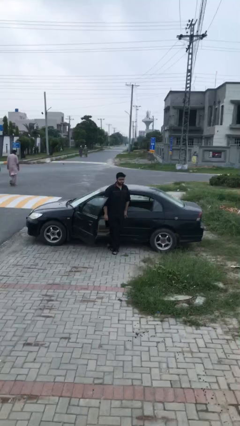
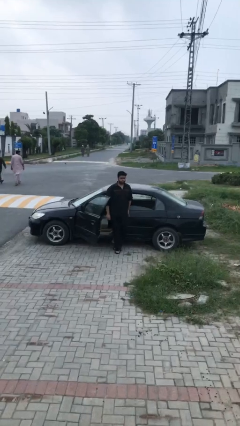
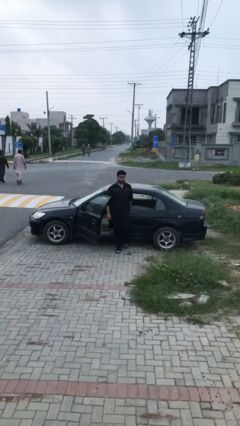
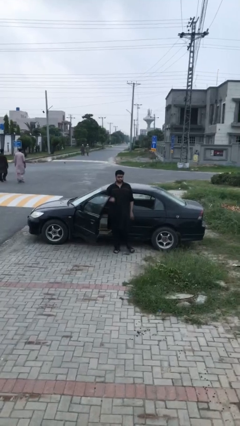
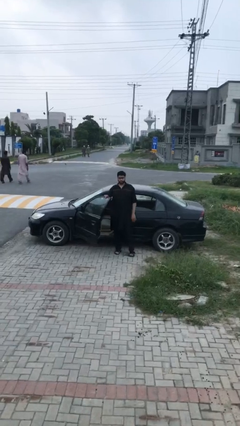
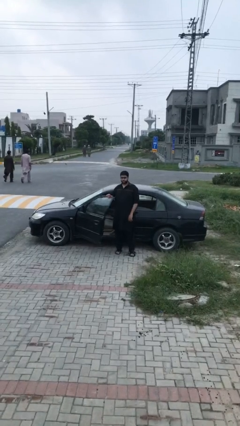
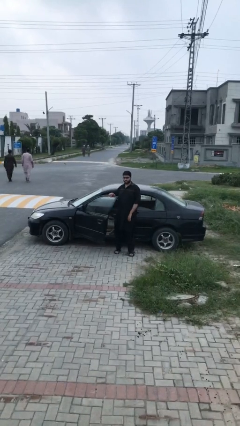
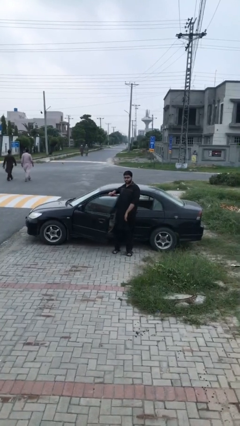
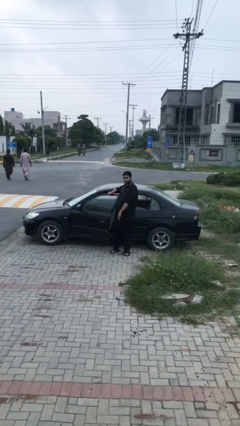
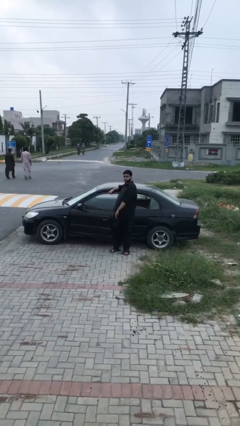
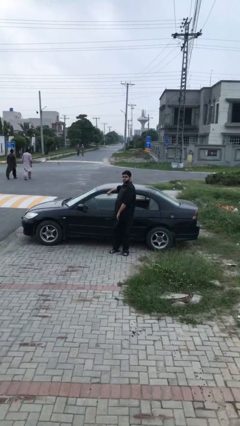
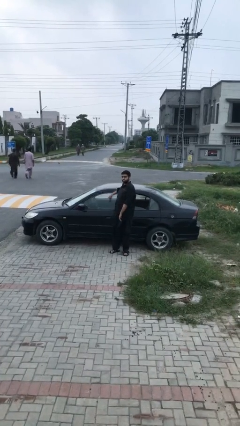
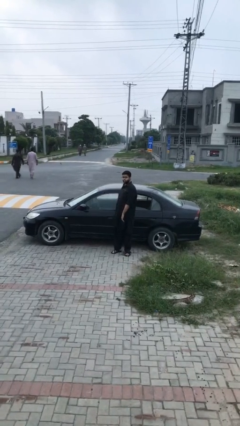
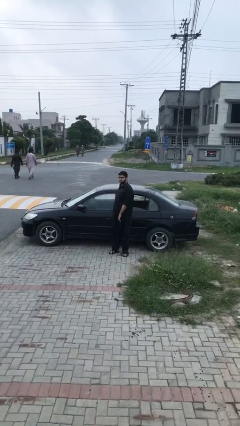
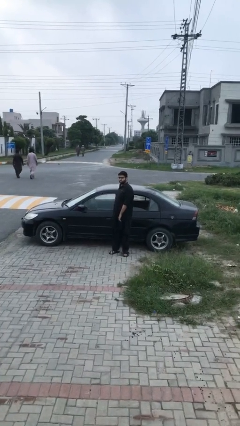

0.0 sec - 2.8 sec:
person closes car door

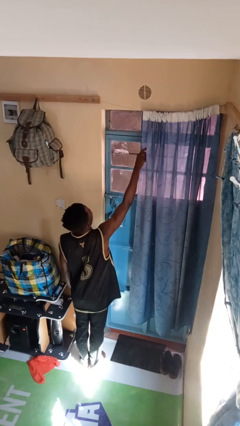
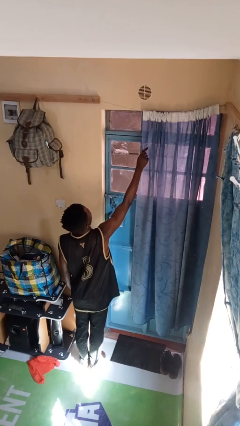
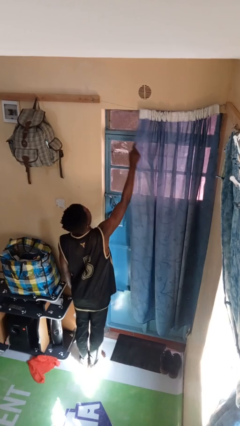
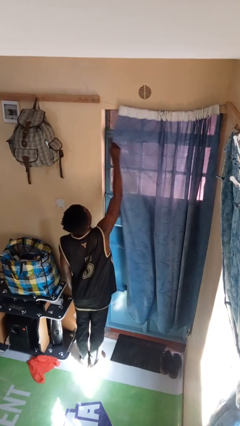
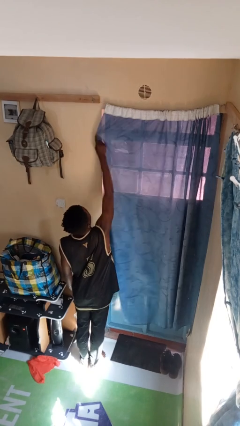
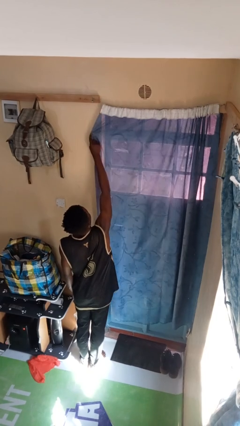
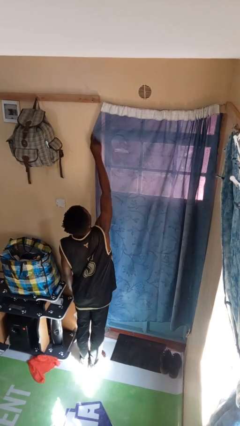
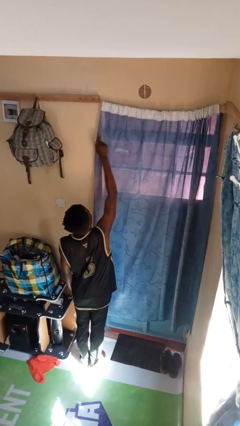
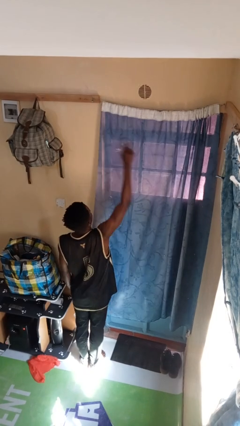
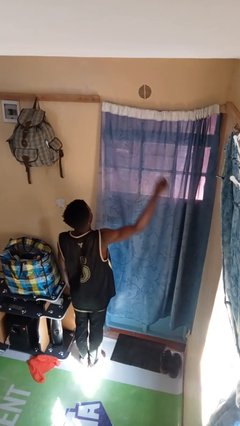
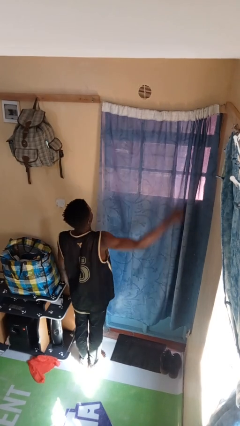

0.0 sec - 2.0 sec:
person closes curtains

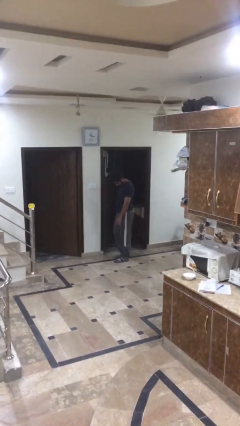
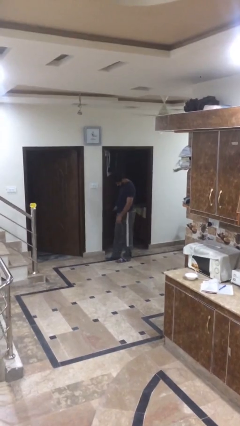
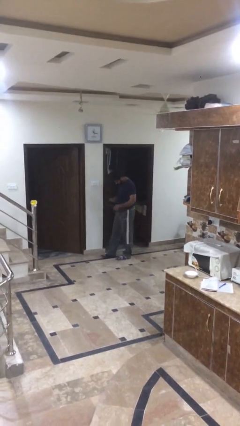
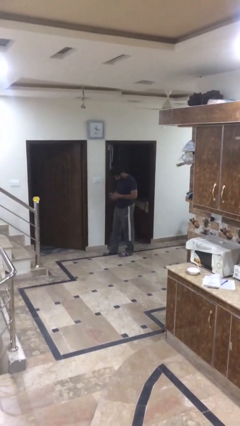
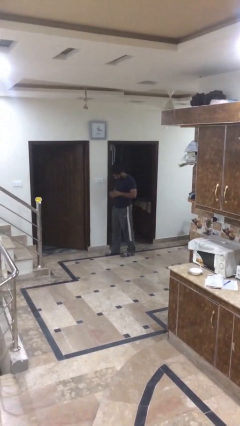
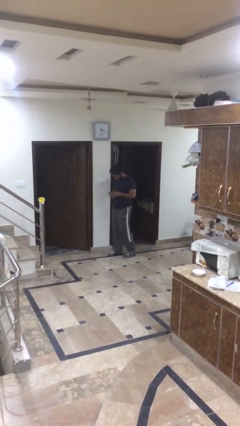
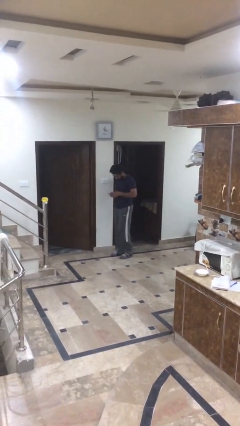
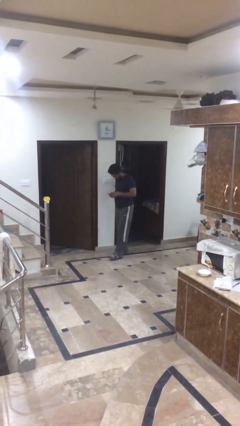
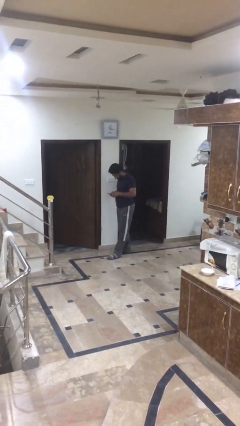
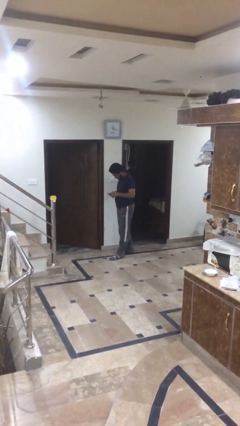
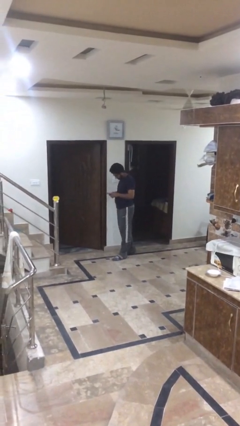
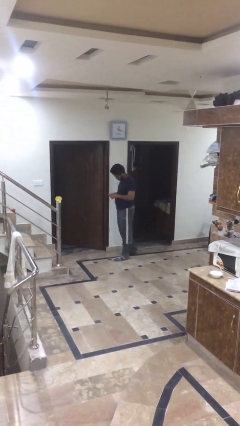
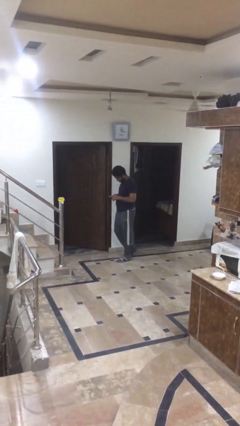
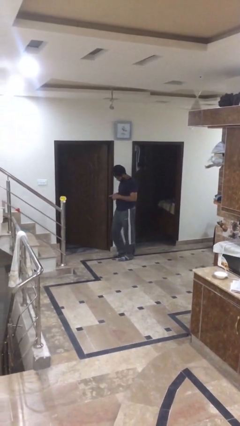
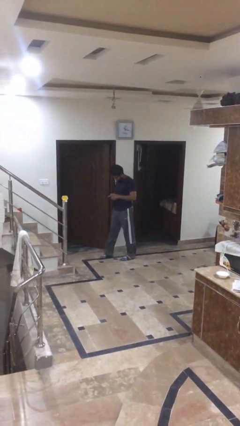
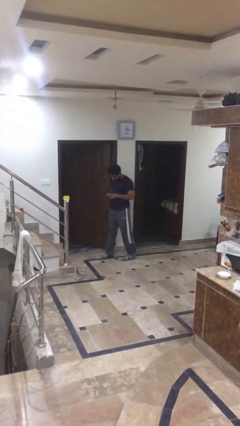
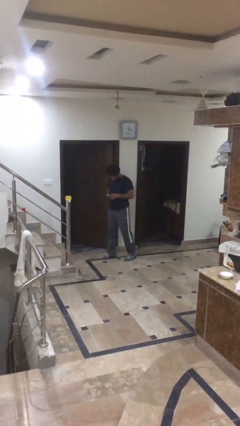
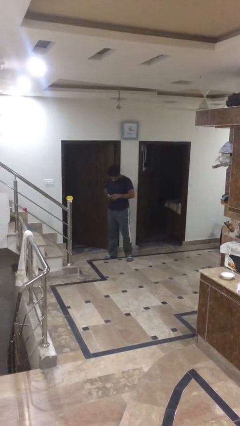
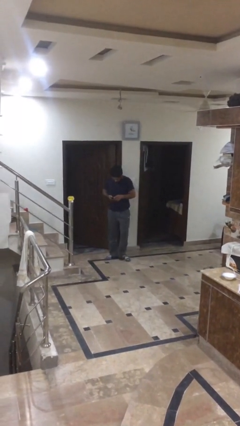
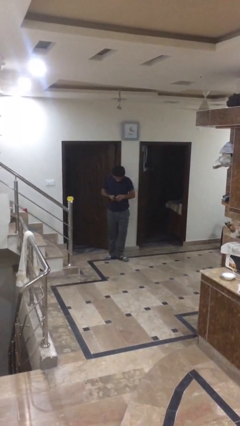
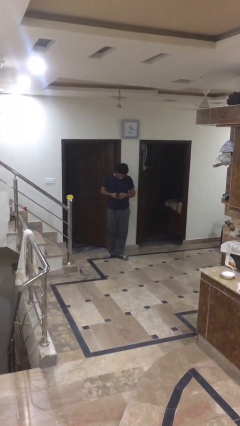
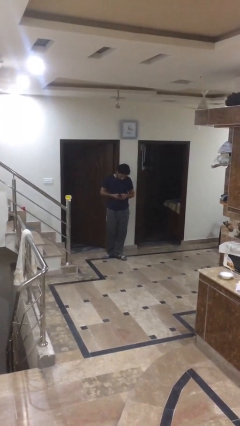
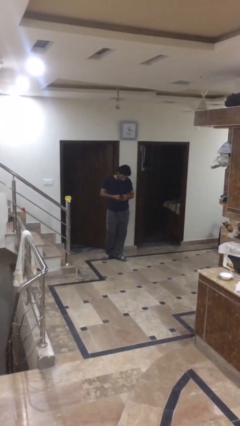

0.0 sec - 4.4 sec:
person texts on phone

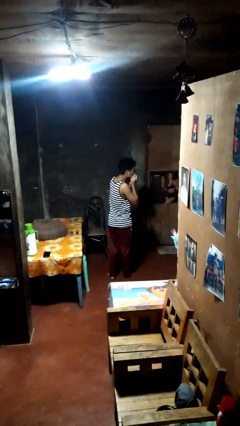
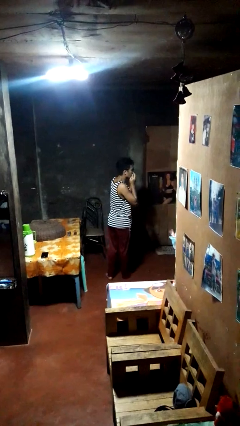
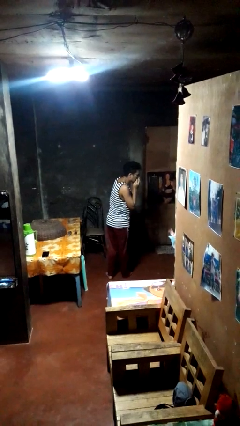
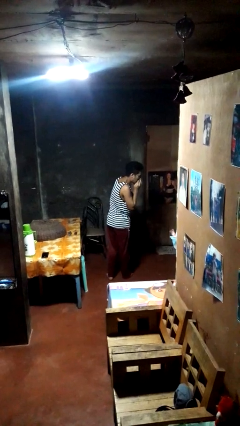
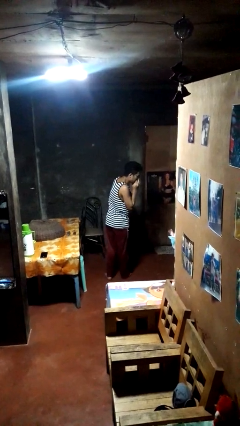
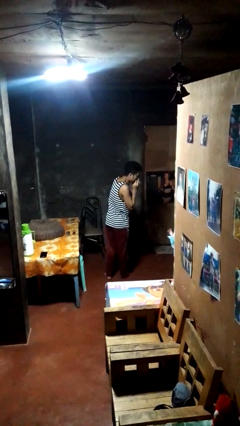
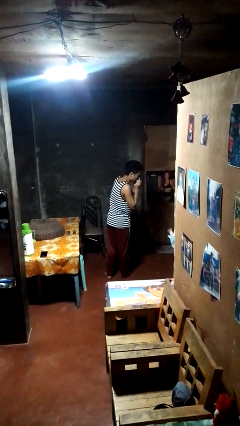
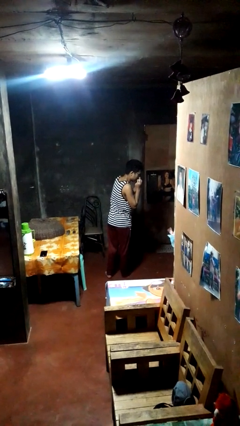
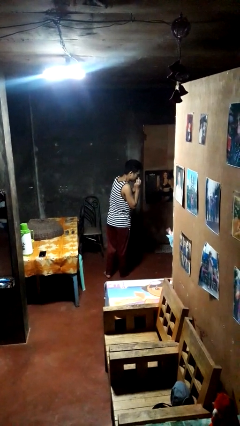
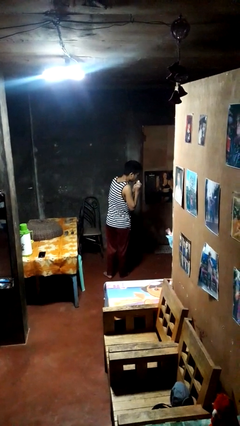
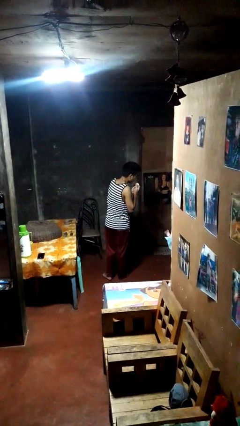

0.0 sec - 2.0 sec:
person blows nose

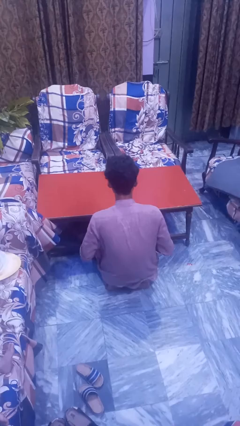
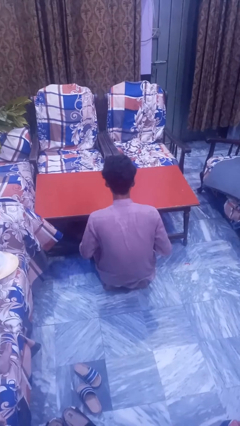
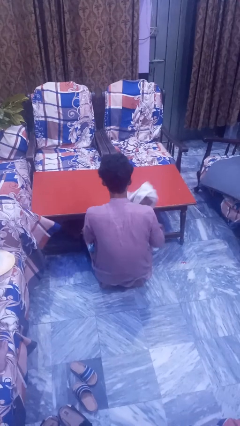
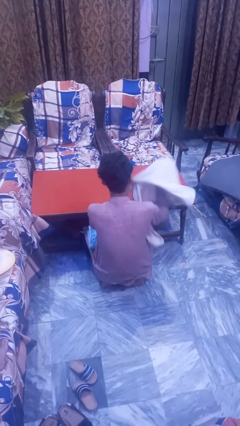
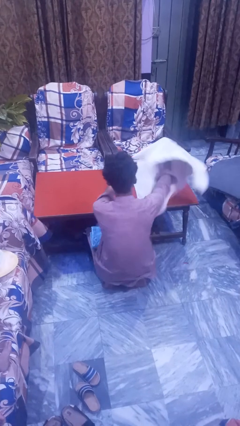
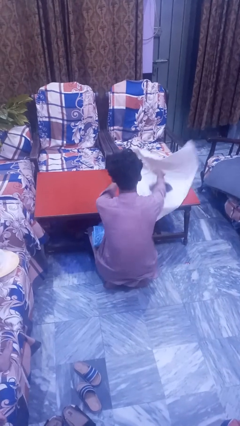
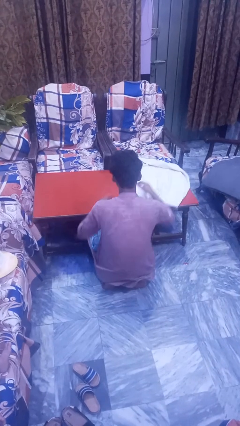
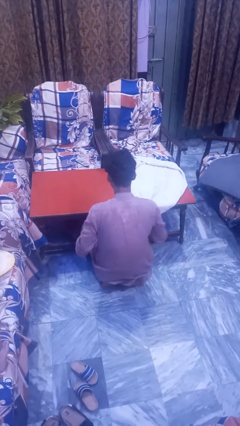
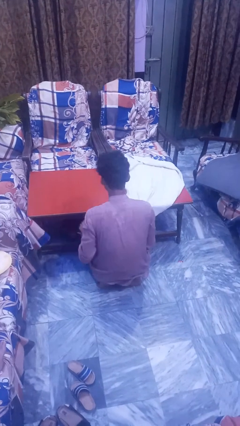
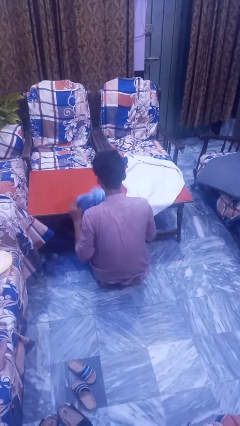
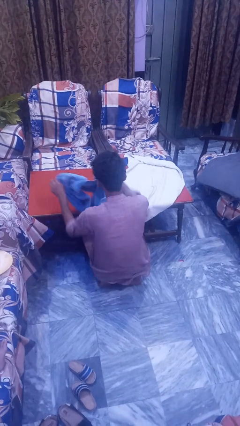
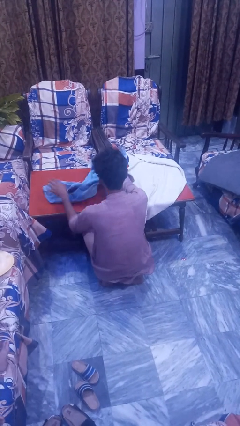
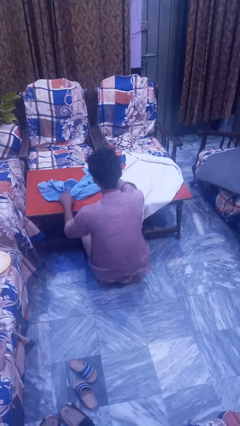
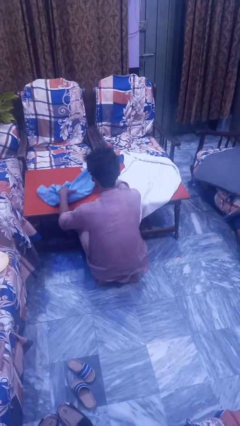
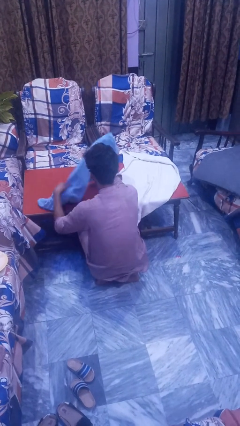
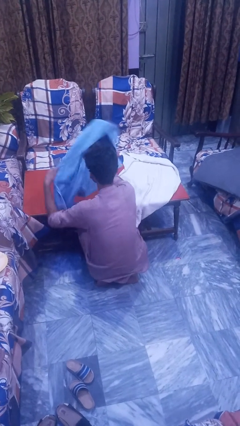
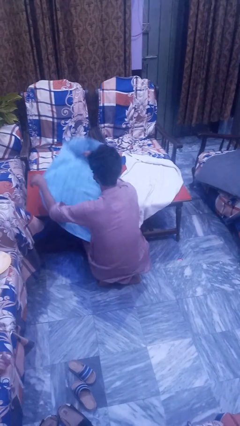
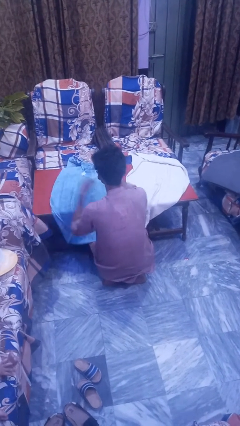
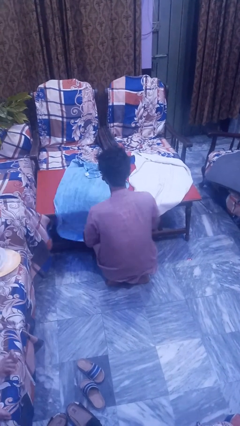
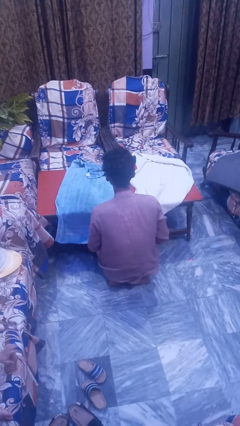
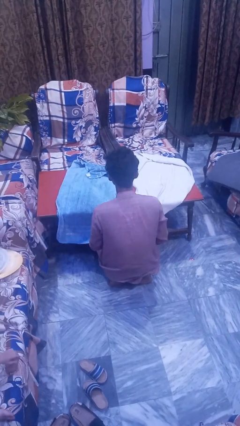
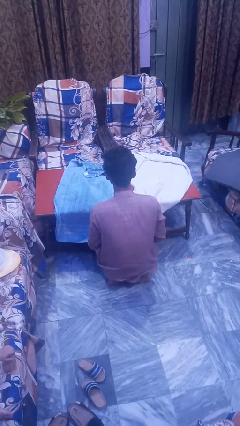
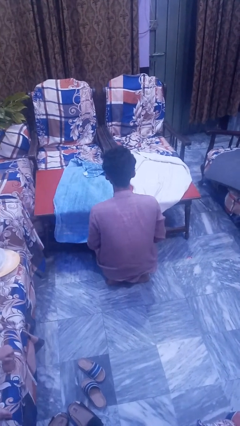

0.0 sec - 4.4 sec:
person spreads tablecloth

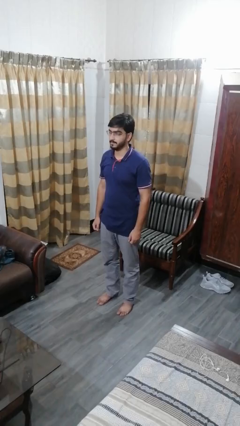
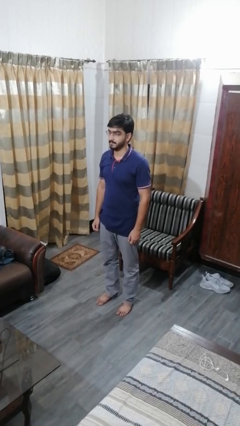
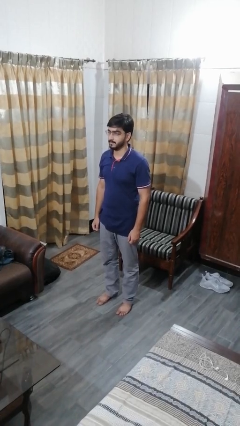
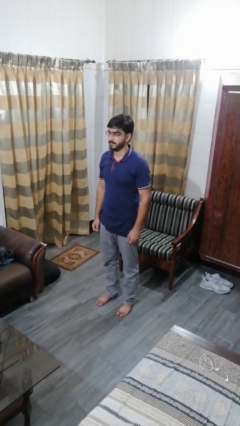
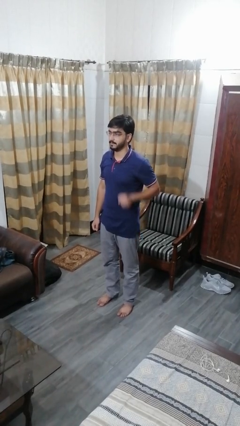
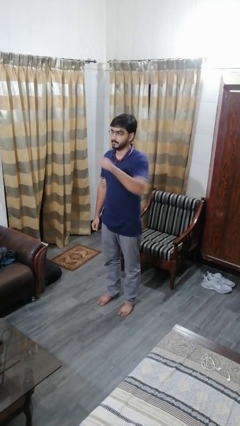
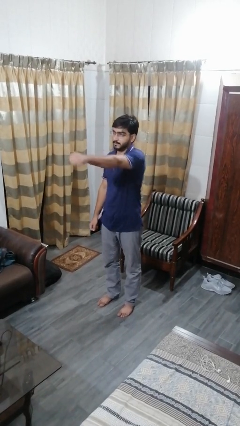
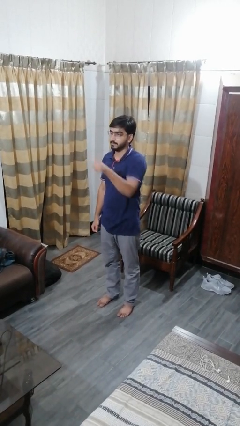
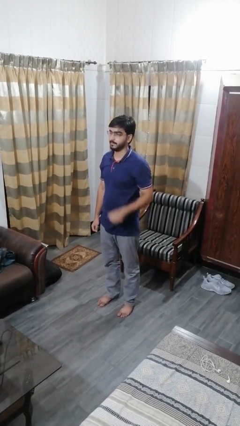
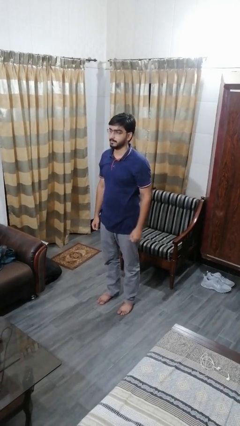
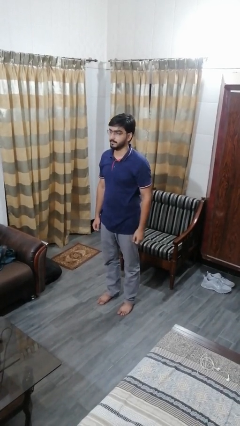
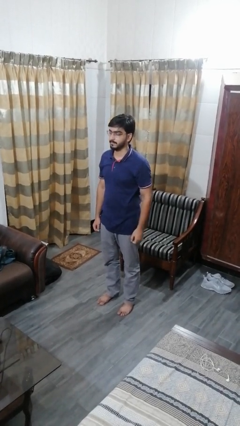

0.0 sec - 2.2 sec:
person punches
